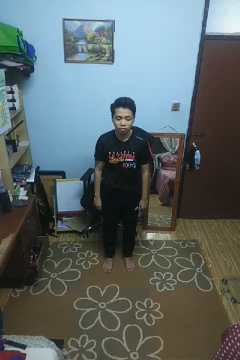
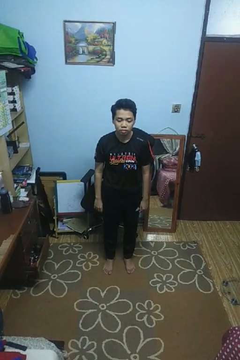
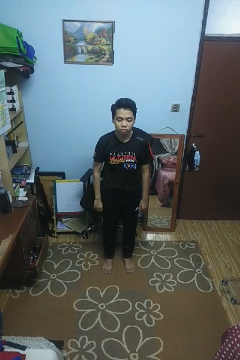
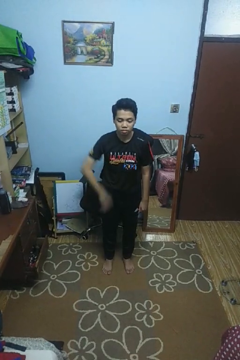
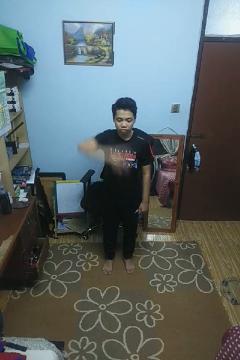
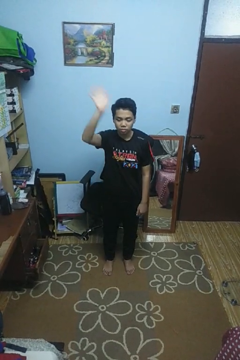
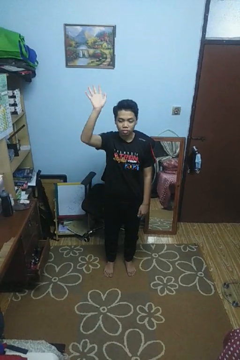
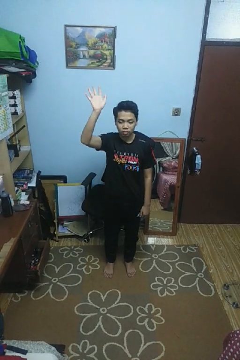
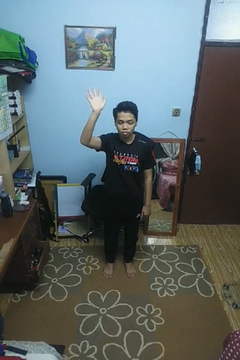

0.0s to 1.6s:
person gestures swipe up

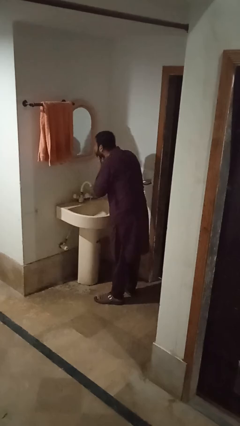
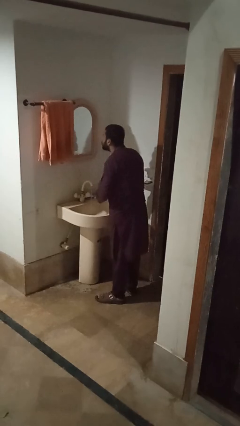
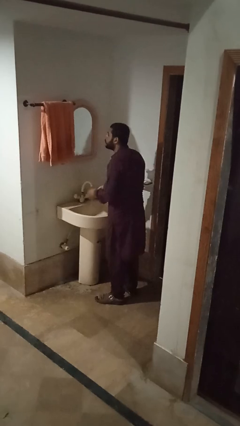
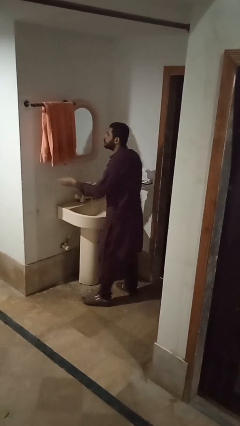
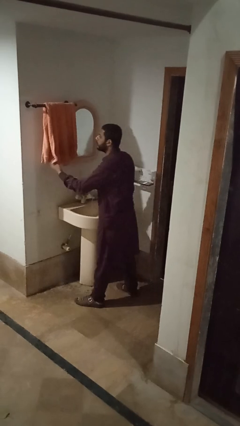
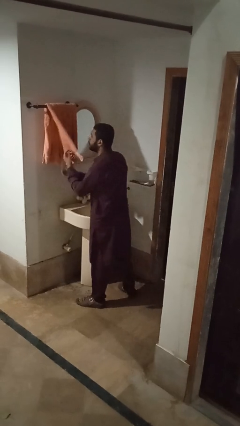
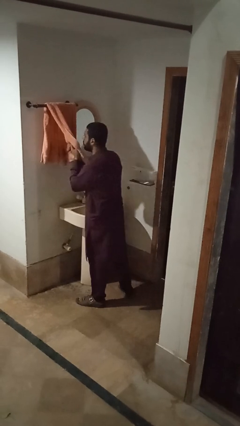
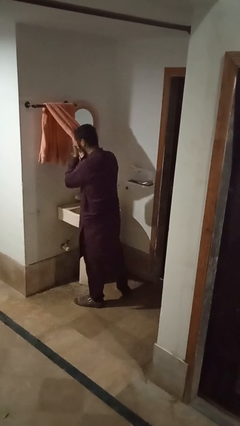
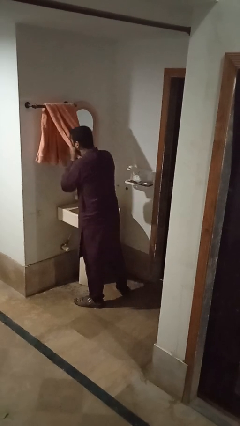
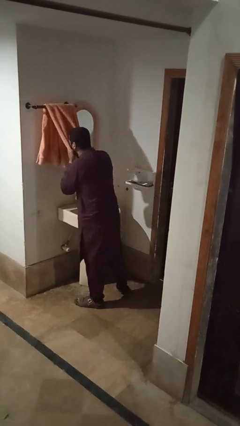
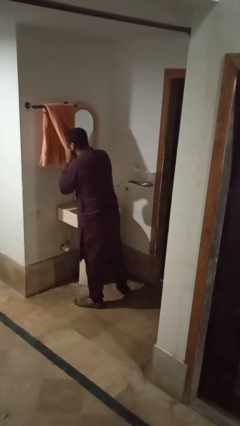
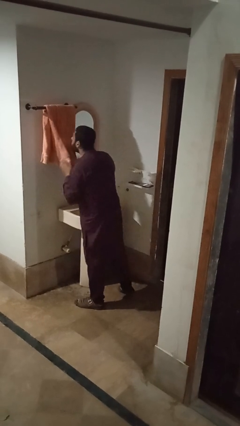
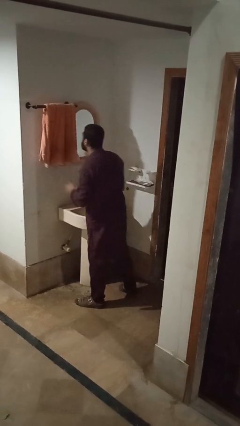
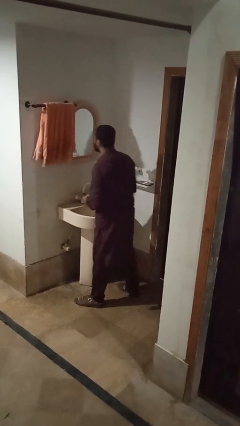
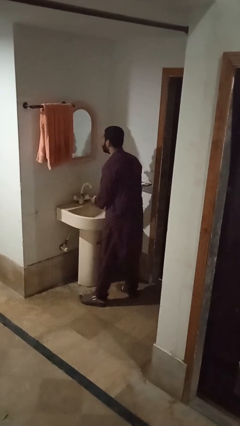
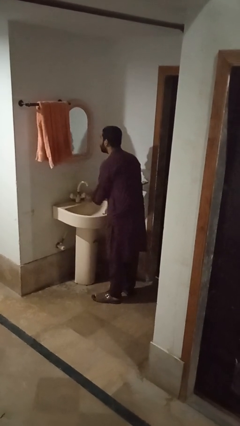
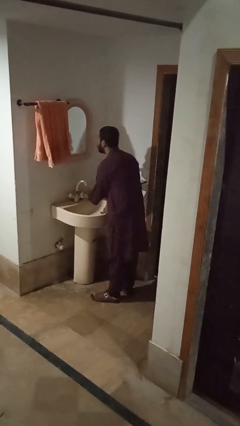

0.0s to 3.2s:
person dries face with towel

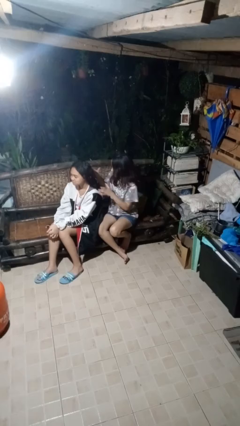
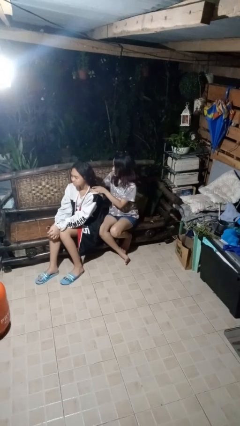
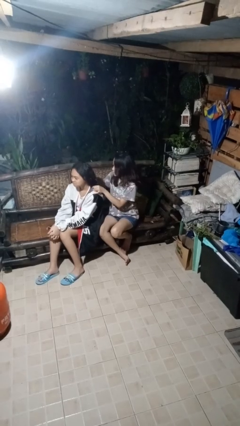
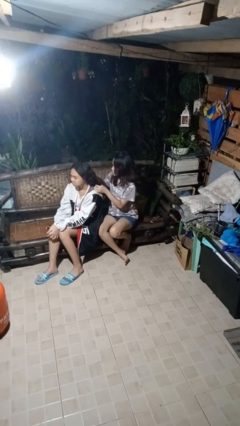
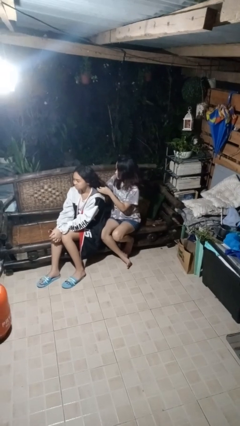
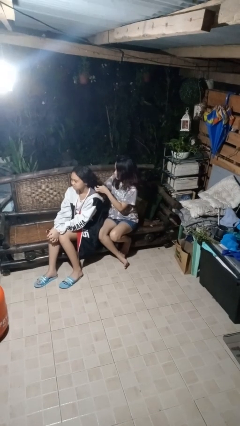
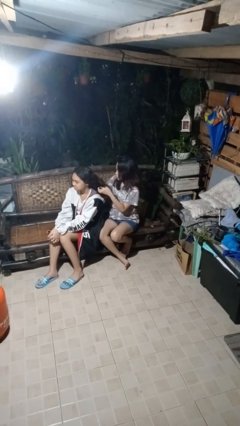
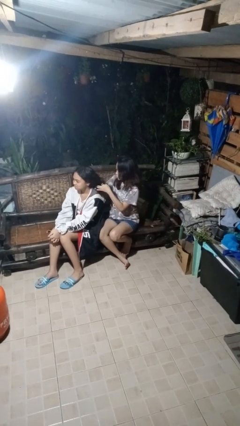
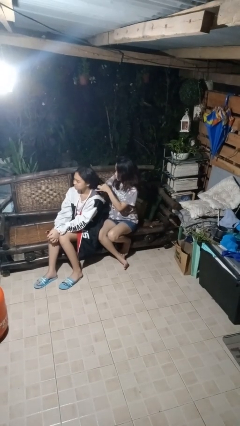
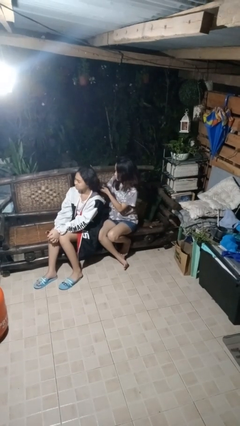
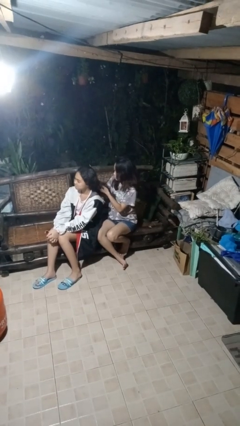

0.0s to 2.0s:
person braids hair of person

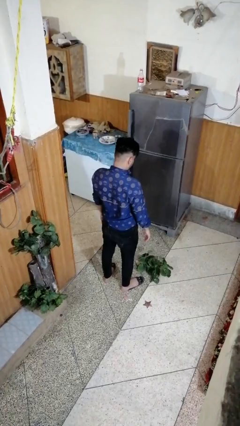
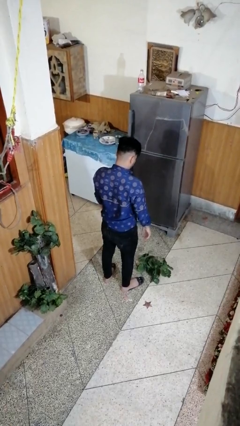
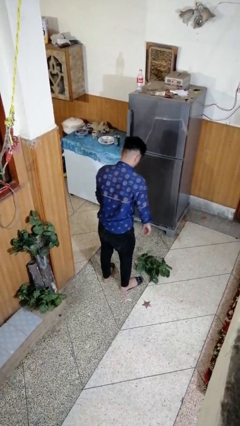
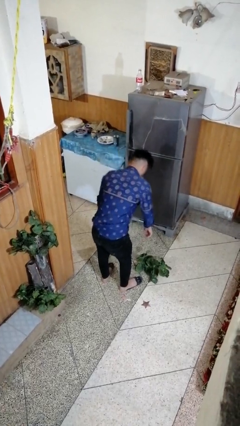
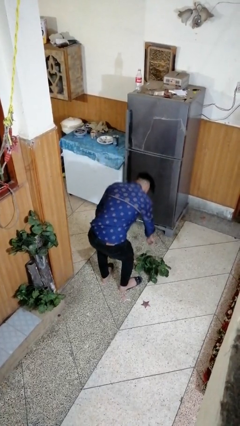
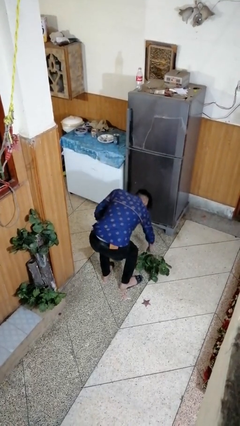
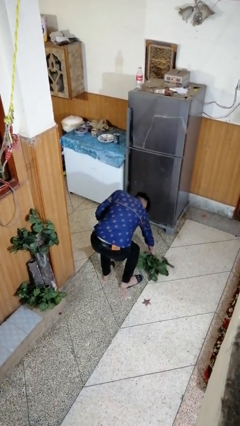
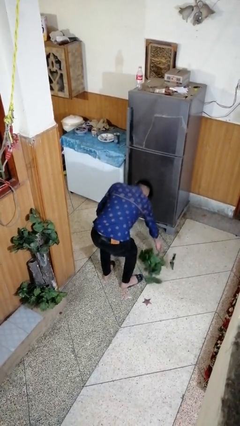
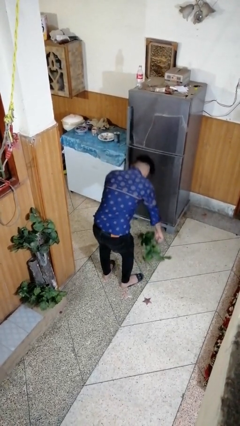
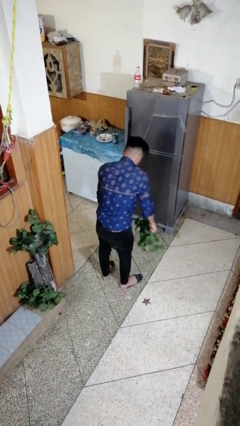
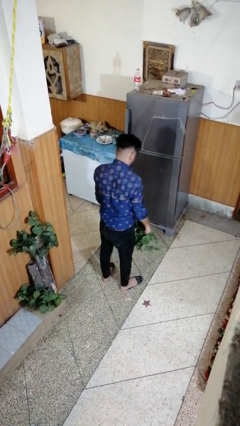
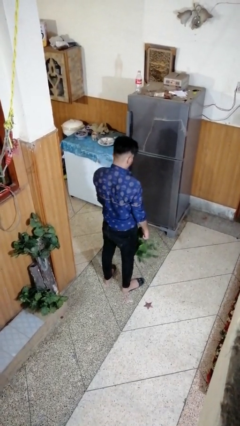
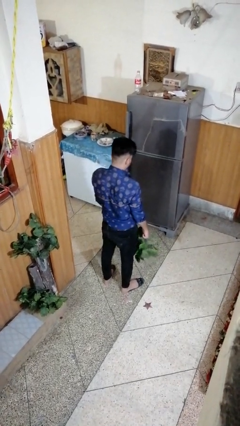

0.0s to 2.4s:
person picks up object from floor

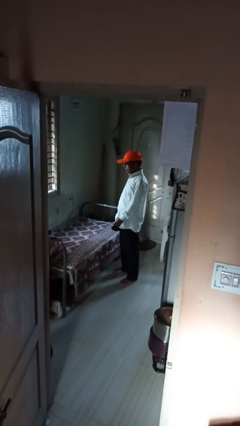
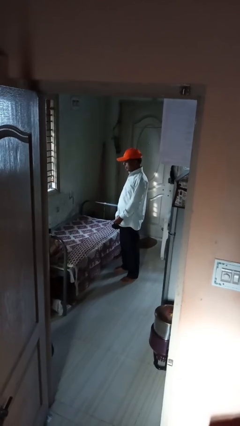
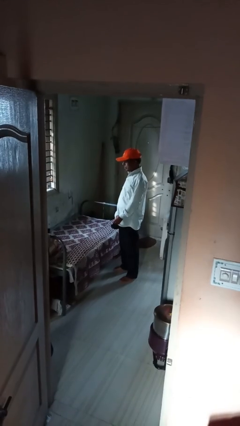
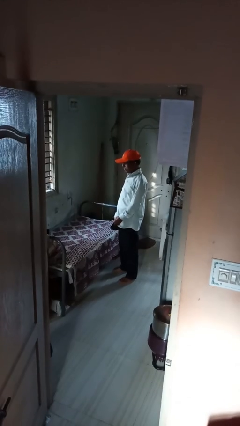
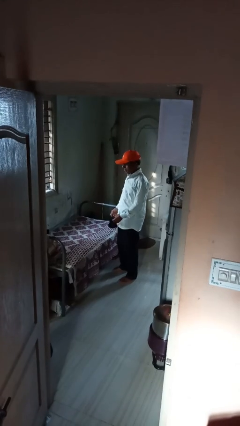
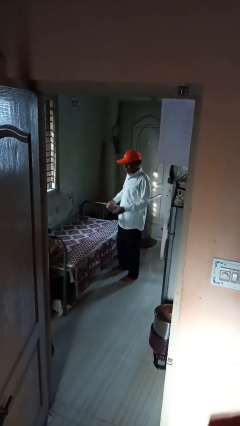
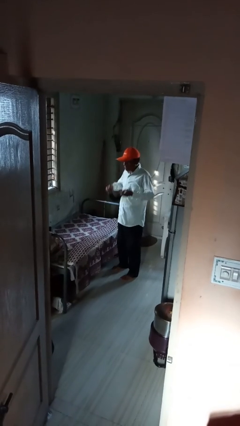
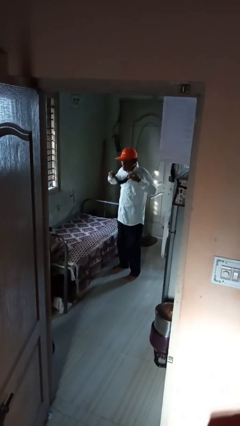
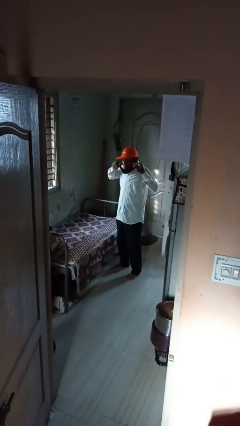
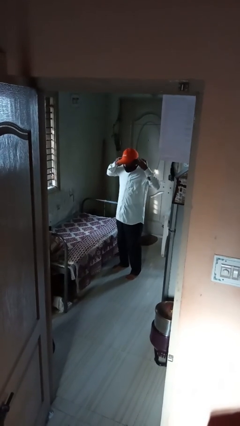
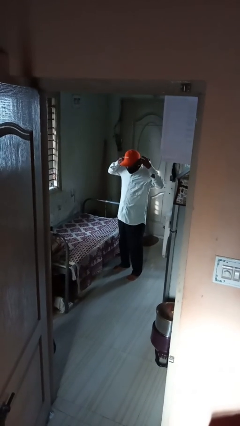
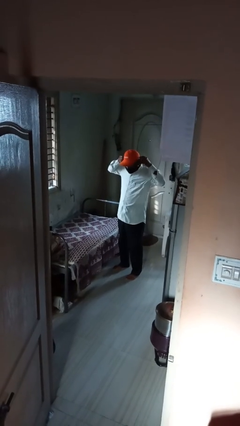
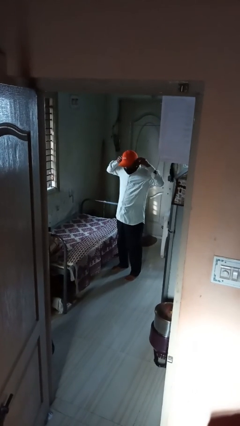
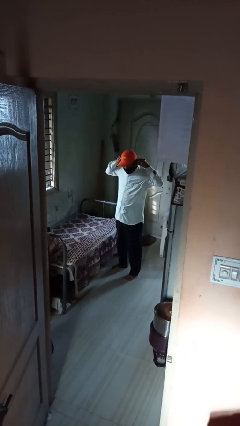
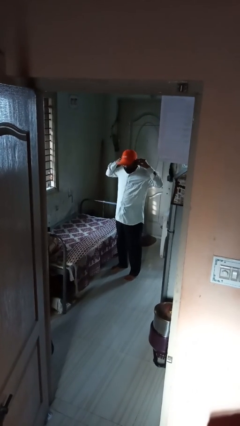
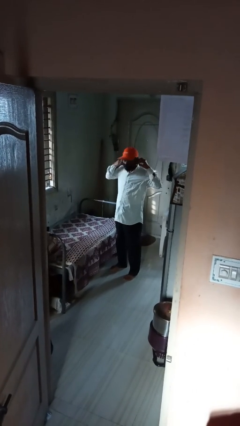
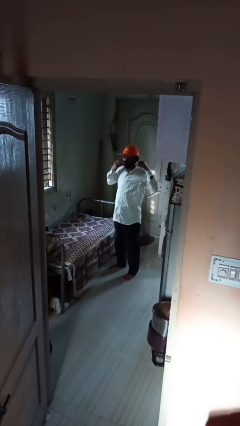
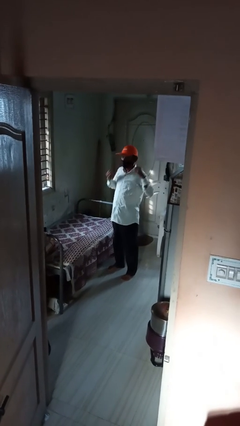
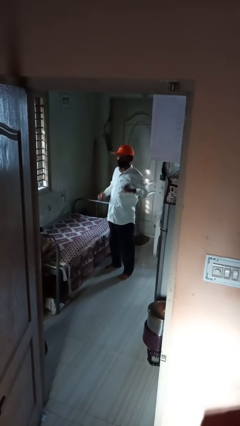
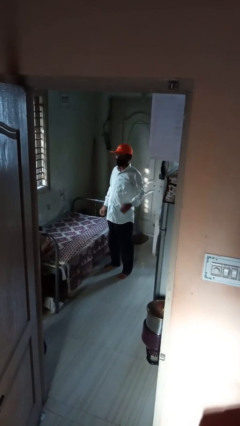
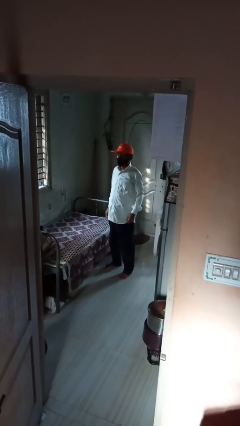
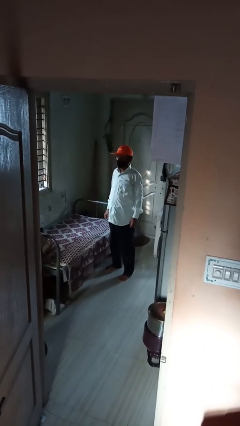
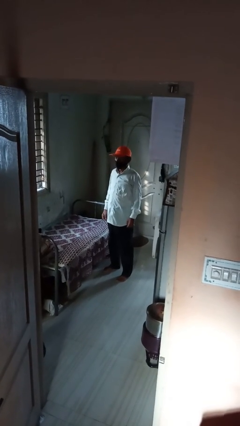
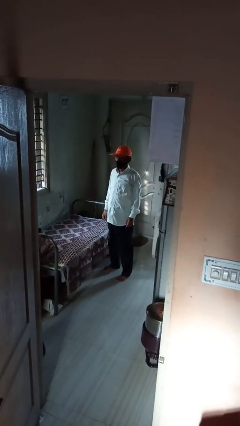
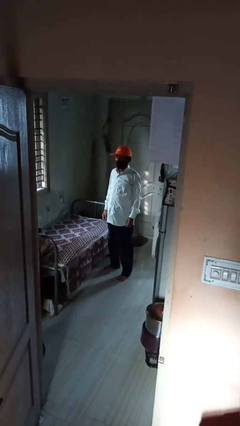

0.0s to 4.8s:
person puts on facemask

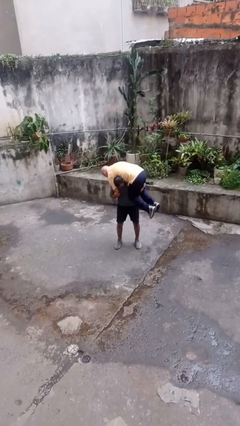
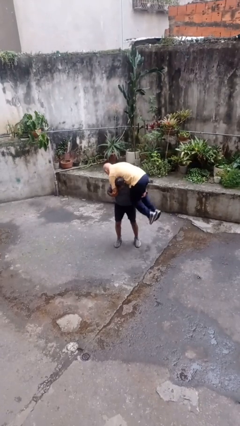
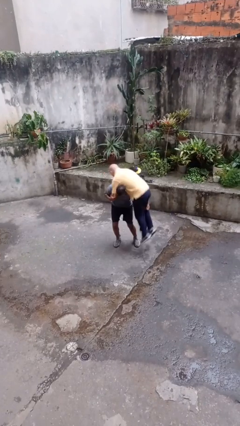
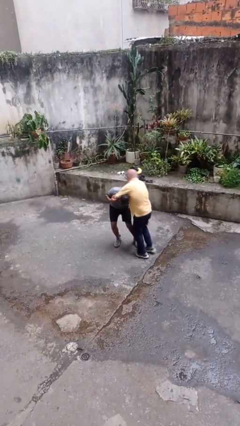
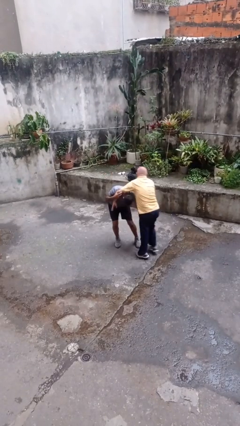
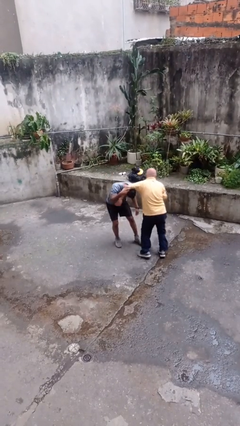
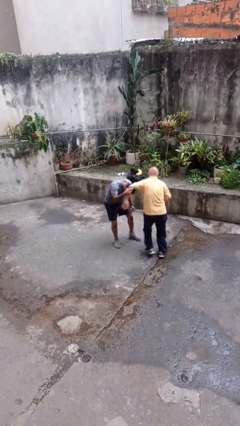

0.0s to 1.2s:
person puts down person

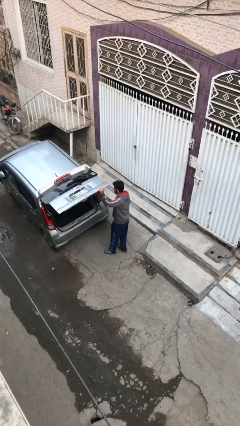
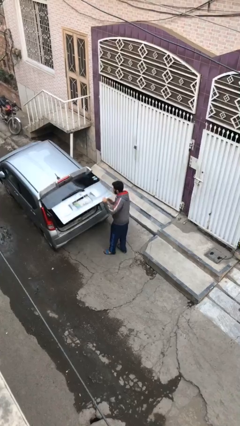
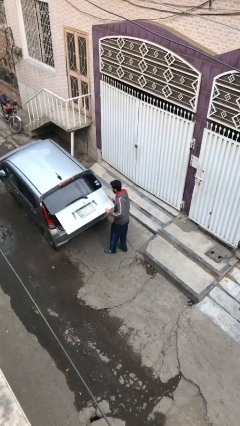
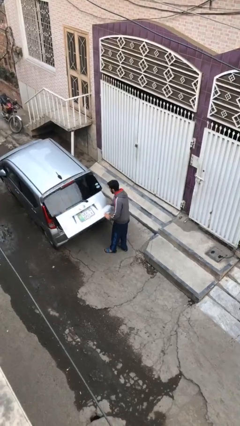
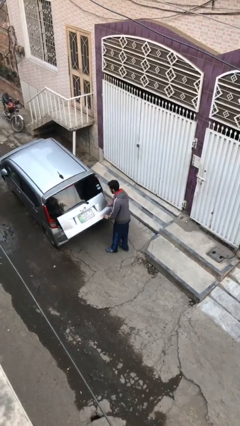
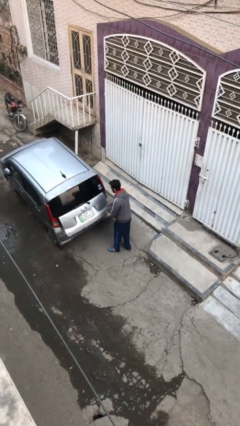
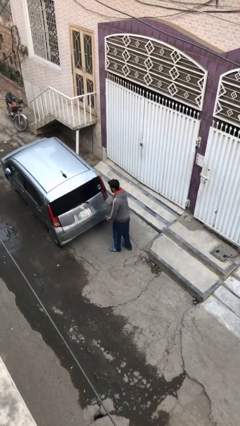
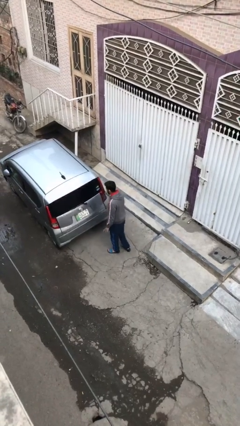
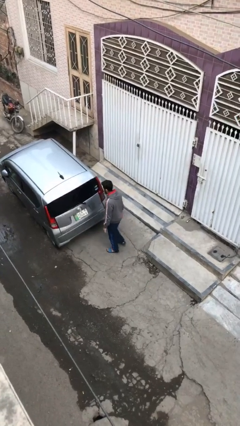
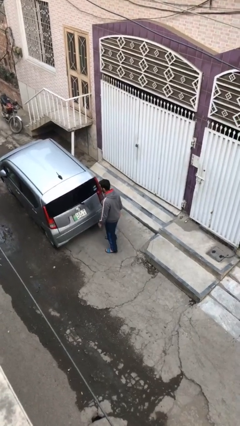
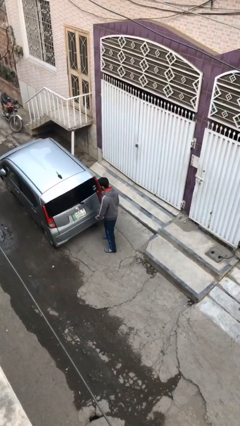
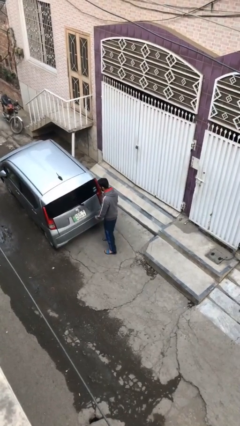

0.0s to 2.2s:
person closes car trunk
